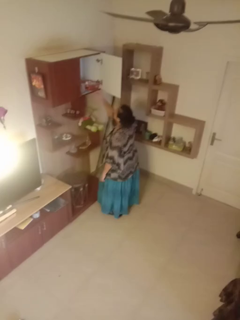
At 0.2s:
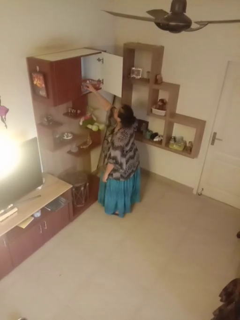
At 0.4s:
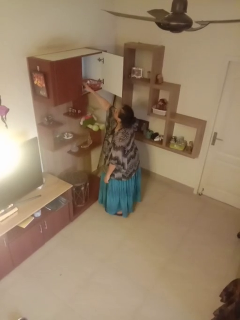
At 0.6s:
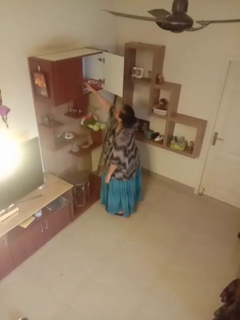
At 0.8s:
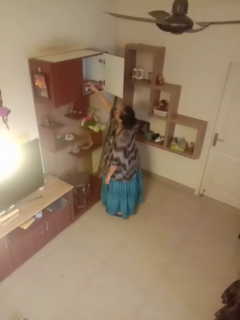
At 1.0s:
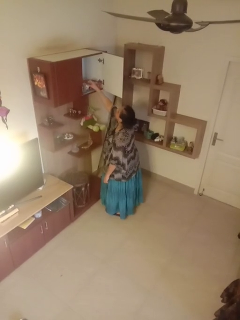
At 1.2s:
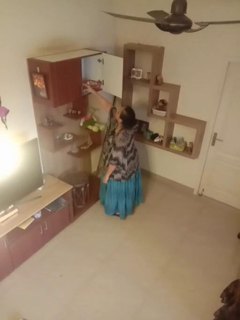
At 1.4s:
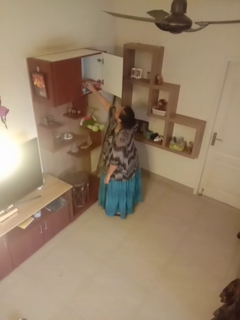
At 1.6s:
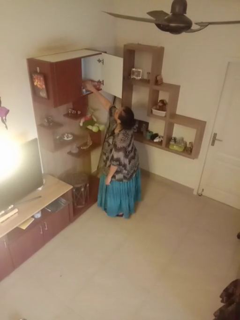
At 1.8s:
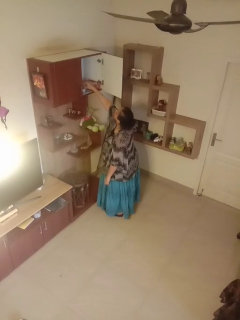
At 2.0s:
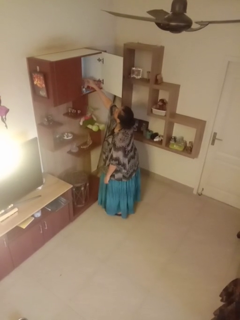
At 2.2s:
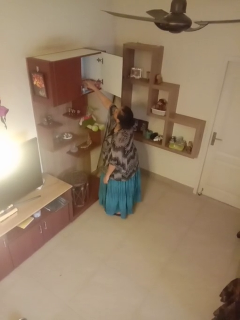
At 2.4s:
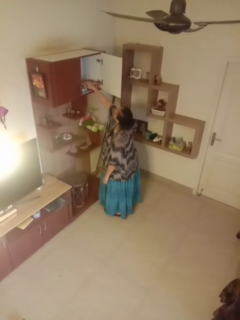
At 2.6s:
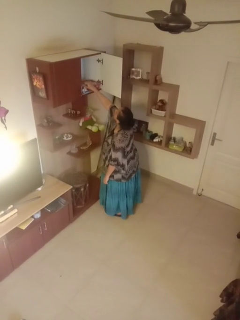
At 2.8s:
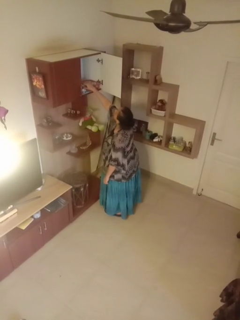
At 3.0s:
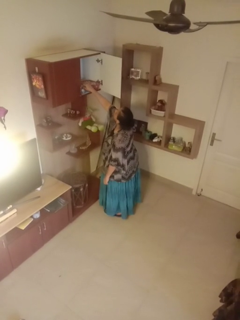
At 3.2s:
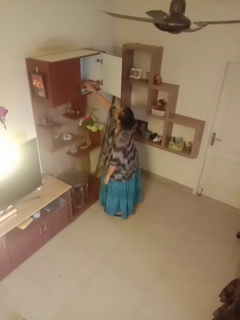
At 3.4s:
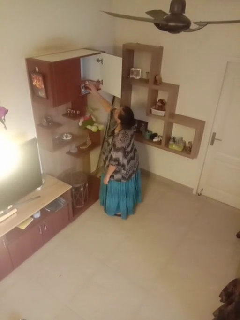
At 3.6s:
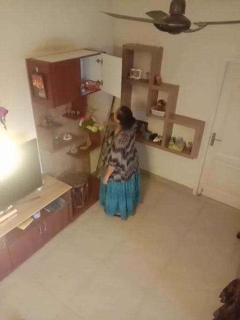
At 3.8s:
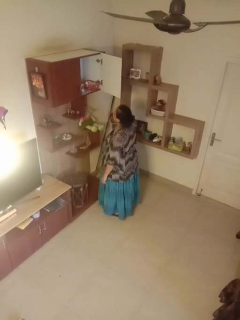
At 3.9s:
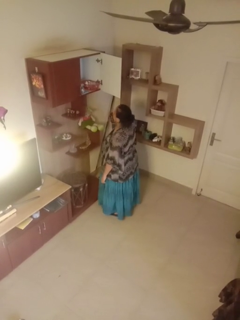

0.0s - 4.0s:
person searches in cabinet

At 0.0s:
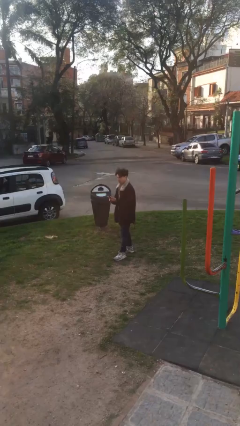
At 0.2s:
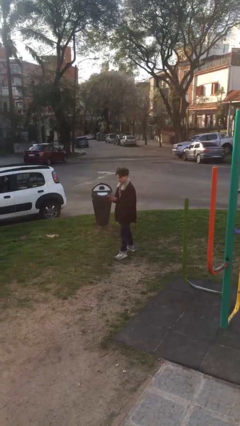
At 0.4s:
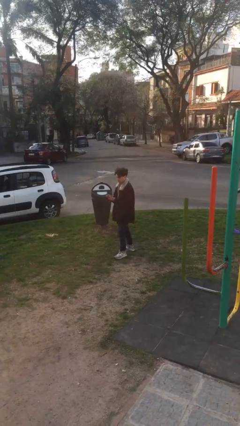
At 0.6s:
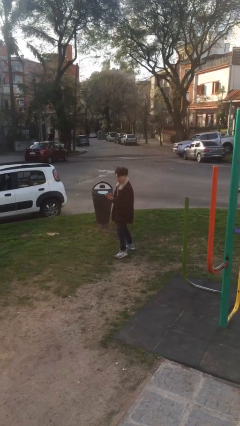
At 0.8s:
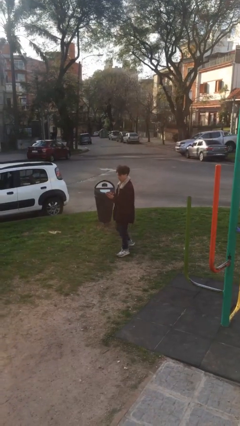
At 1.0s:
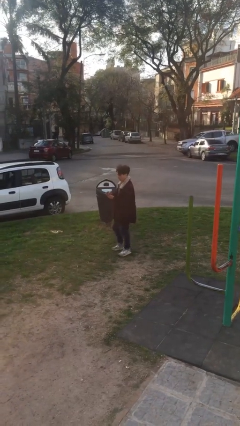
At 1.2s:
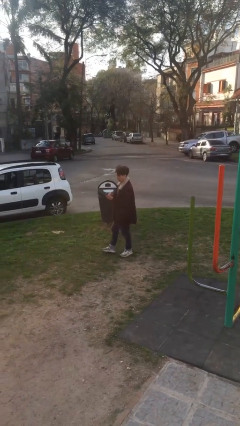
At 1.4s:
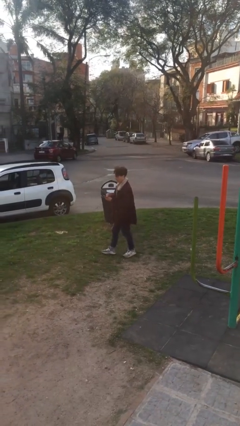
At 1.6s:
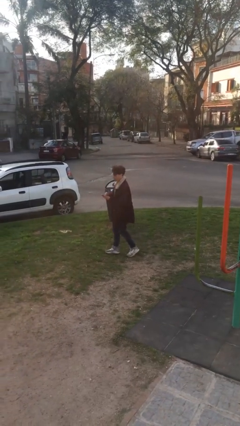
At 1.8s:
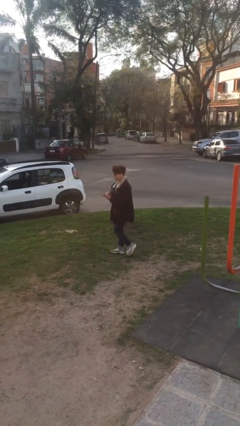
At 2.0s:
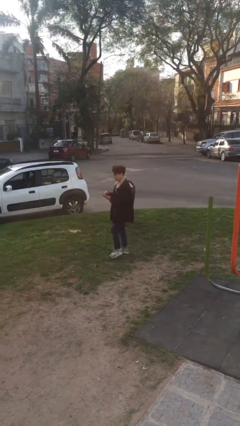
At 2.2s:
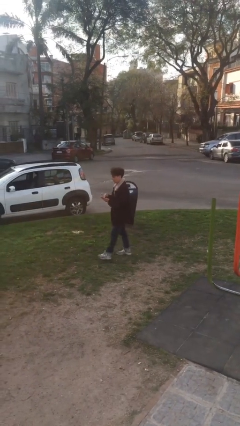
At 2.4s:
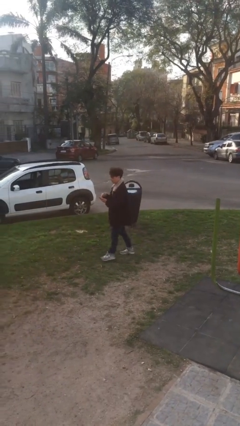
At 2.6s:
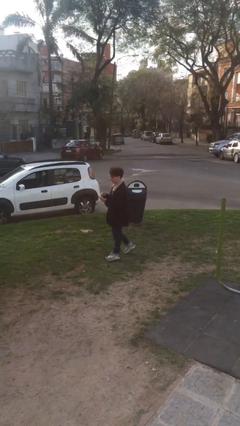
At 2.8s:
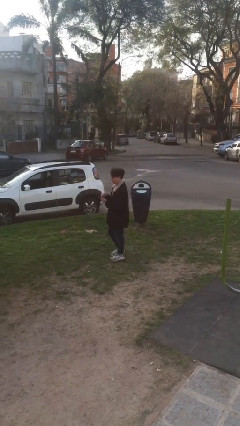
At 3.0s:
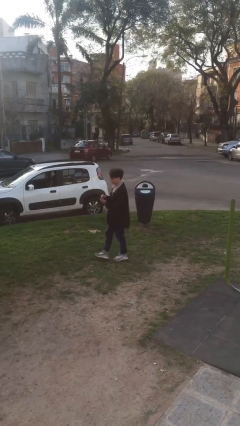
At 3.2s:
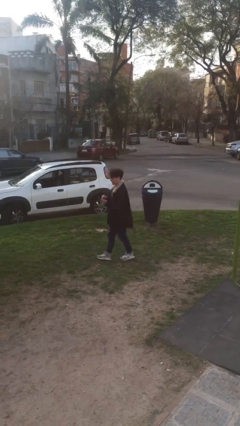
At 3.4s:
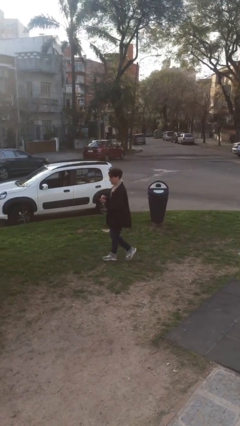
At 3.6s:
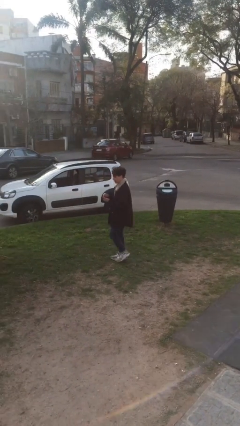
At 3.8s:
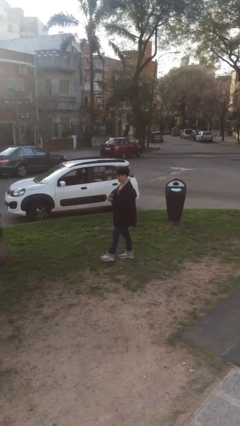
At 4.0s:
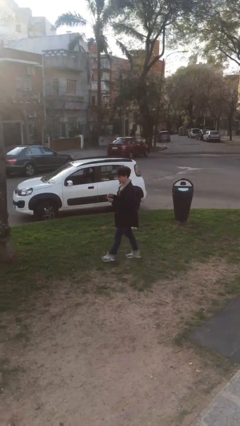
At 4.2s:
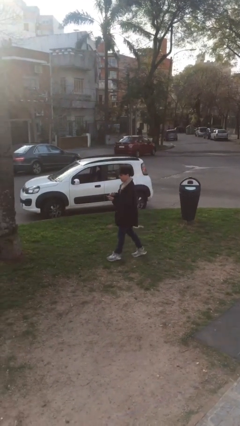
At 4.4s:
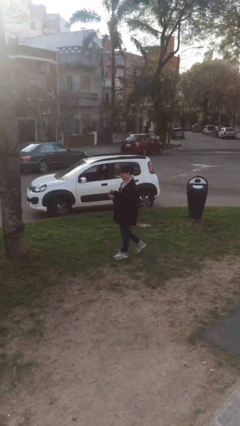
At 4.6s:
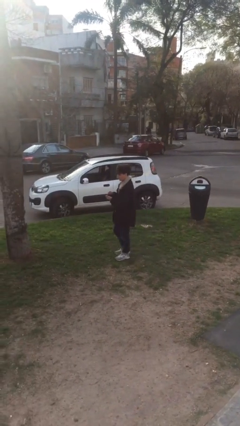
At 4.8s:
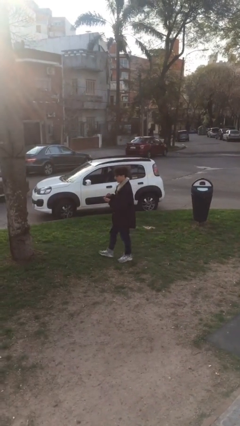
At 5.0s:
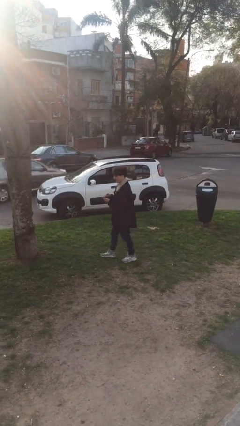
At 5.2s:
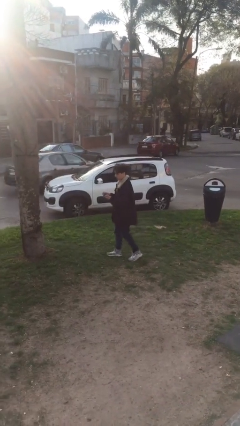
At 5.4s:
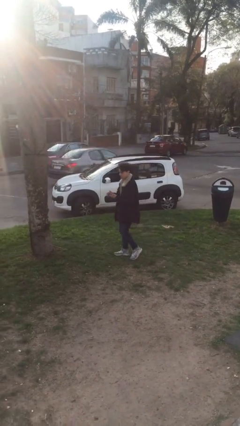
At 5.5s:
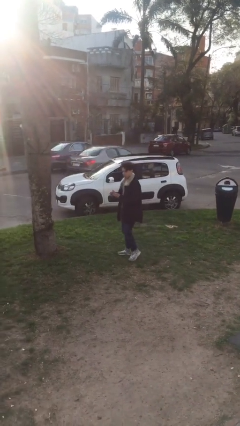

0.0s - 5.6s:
person texts on phone

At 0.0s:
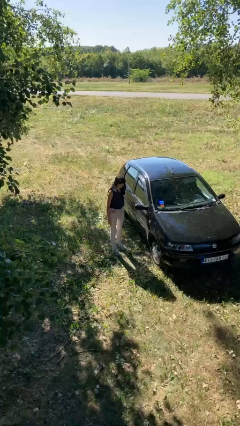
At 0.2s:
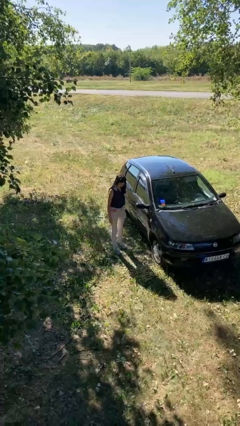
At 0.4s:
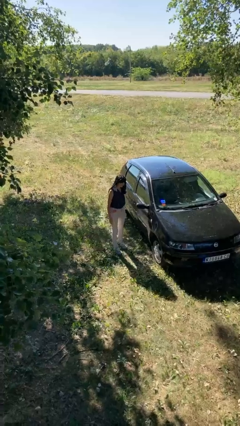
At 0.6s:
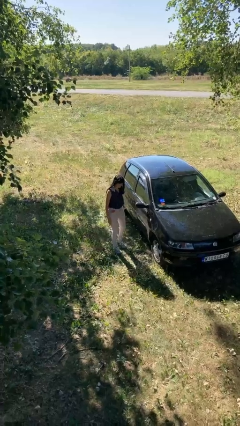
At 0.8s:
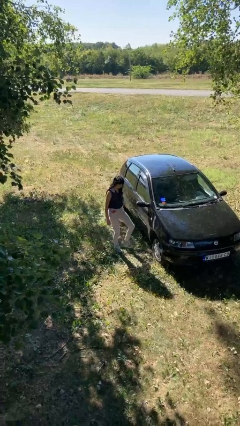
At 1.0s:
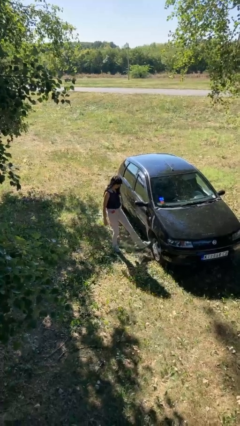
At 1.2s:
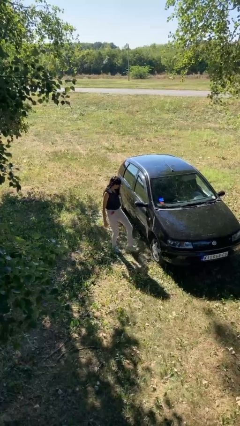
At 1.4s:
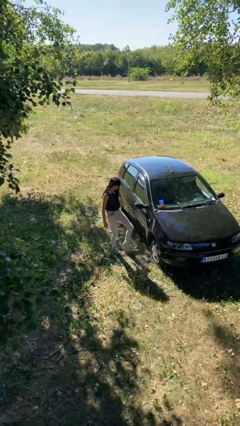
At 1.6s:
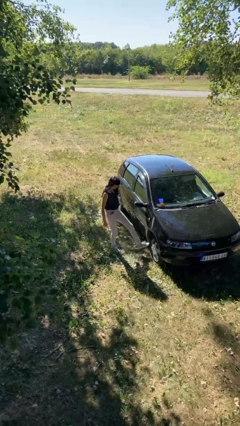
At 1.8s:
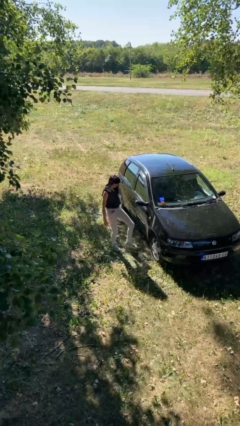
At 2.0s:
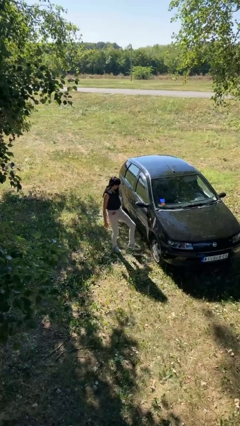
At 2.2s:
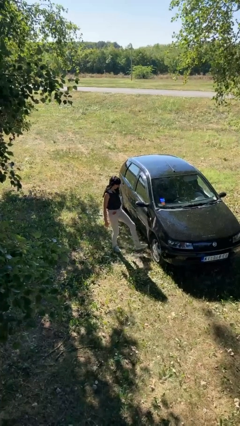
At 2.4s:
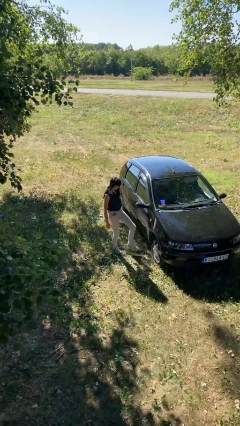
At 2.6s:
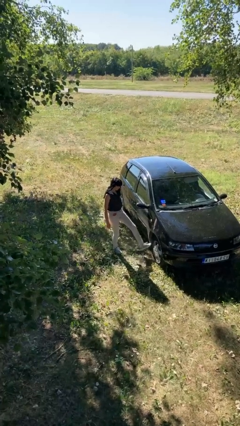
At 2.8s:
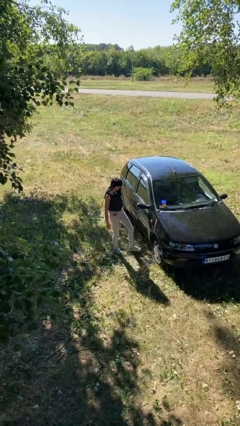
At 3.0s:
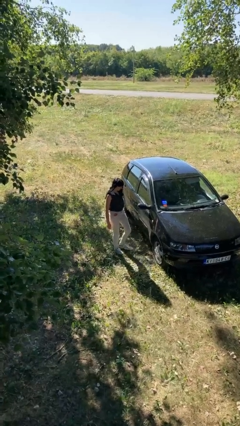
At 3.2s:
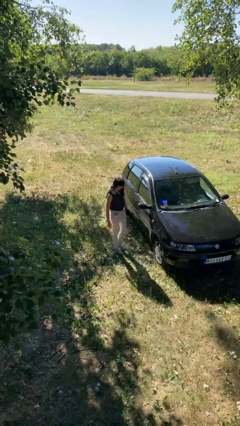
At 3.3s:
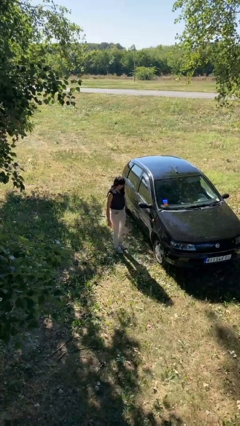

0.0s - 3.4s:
person kicks car tires

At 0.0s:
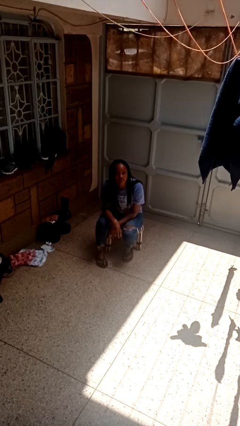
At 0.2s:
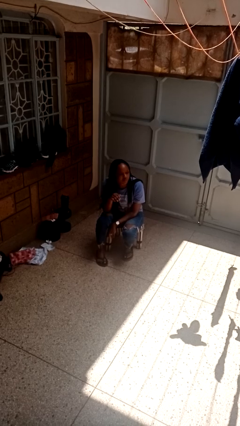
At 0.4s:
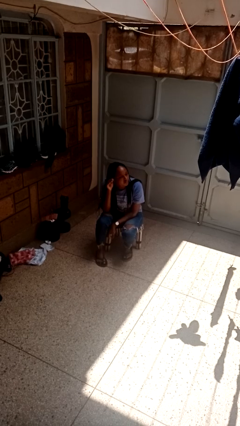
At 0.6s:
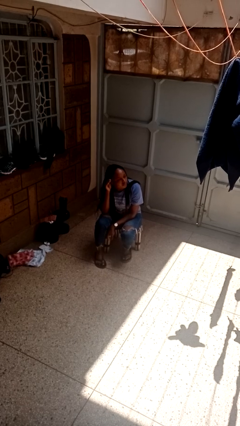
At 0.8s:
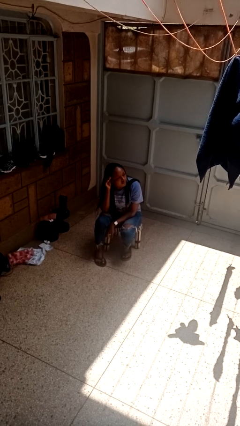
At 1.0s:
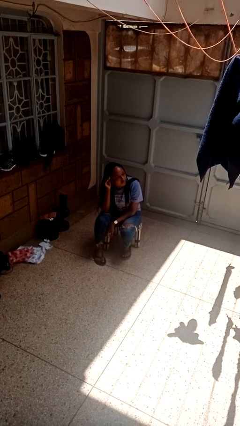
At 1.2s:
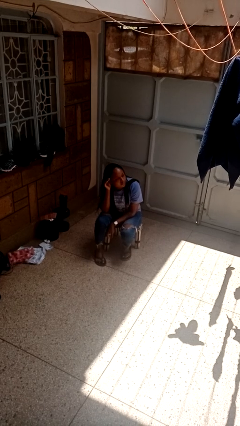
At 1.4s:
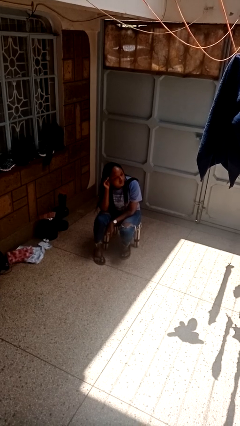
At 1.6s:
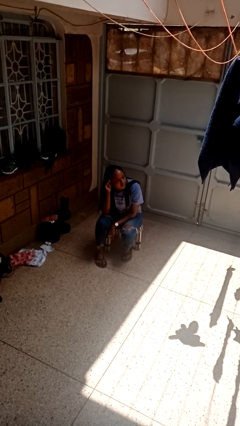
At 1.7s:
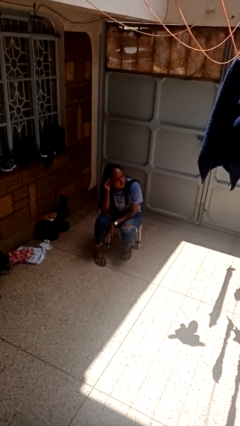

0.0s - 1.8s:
person gestures listen closely

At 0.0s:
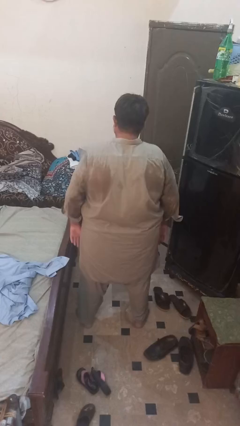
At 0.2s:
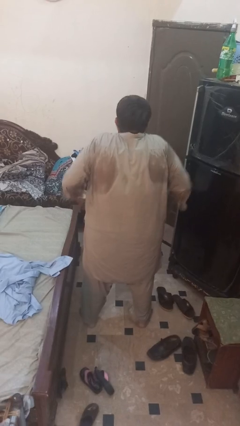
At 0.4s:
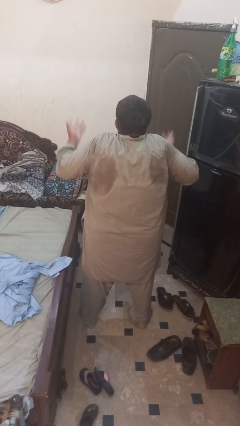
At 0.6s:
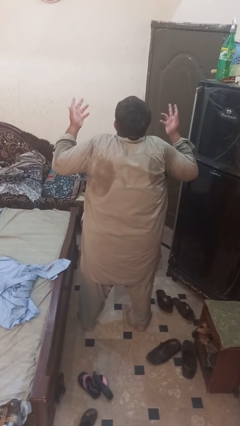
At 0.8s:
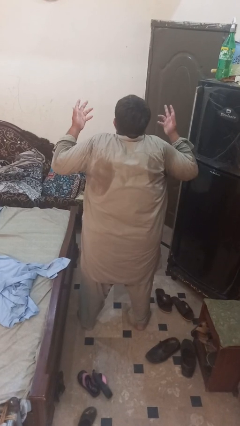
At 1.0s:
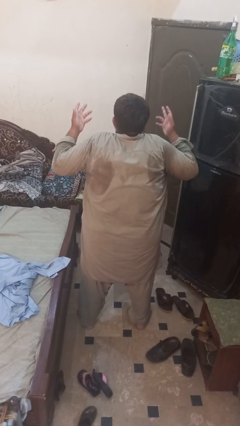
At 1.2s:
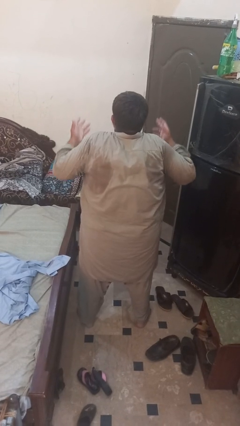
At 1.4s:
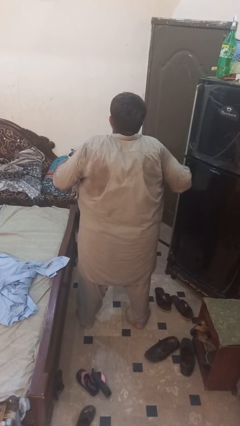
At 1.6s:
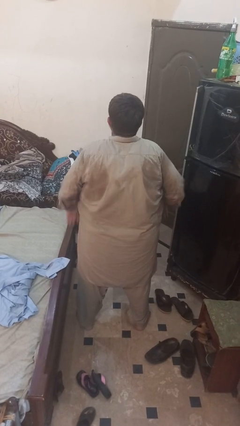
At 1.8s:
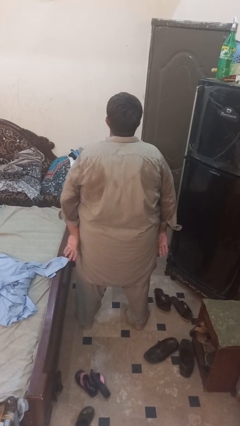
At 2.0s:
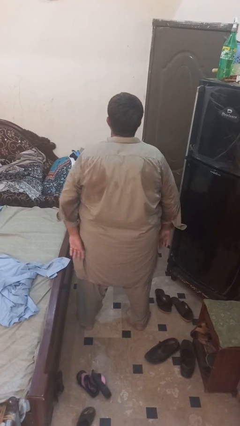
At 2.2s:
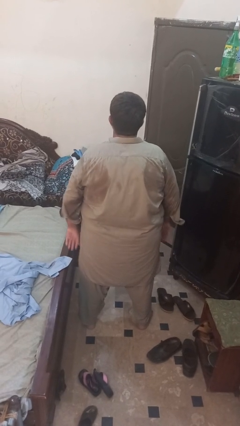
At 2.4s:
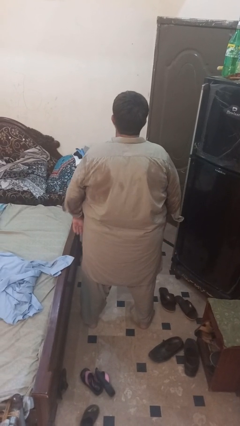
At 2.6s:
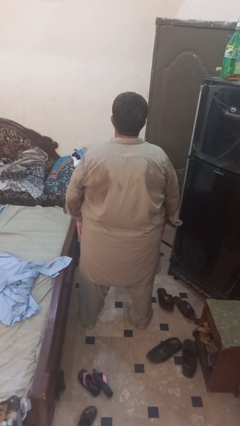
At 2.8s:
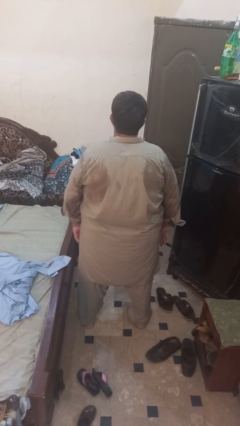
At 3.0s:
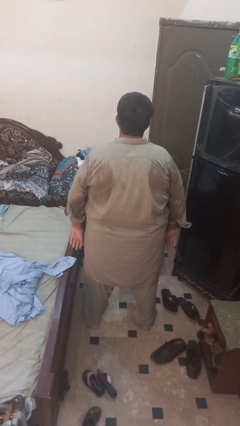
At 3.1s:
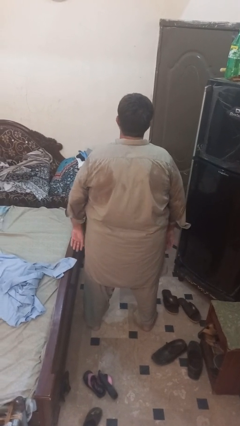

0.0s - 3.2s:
person shrugs

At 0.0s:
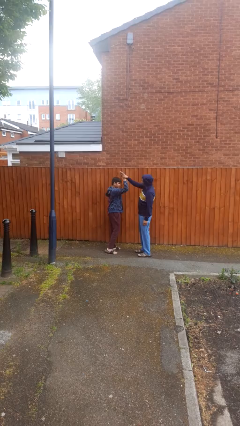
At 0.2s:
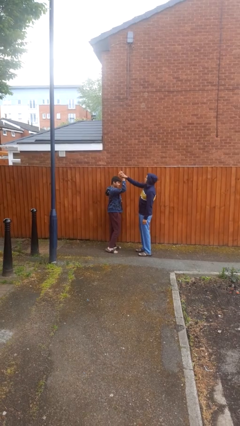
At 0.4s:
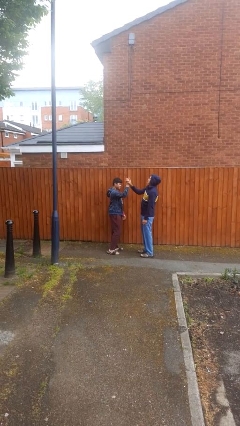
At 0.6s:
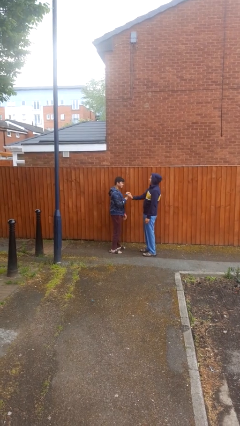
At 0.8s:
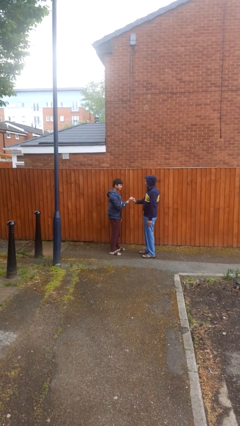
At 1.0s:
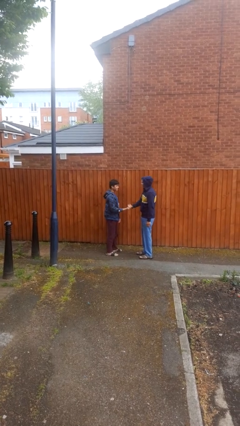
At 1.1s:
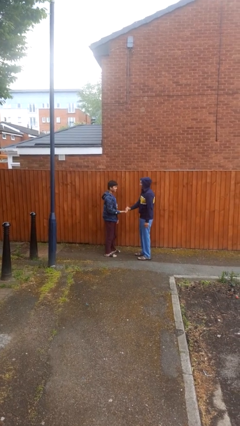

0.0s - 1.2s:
person highfives hand
